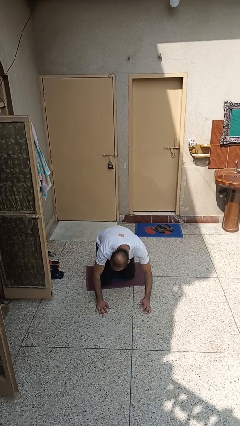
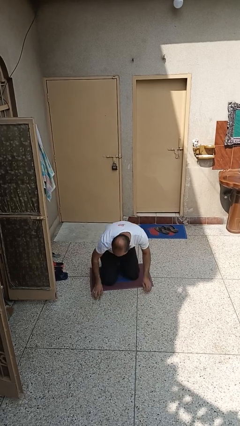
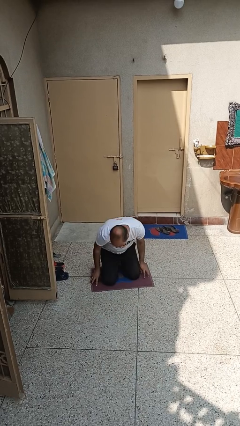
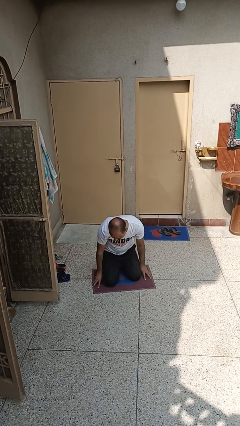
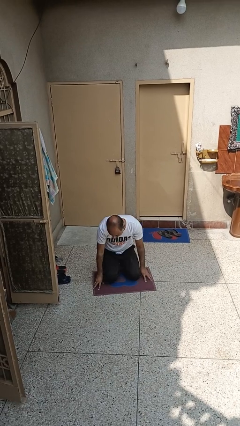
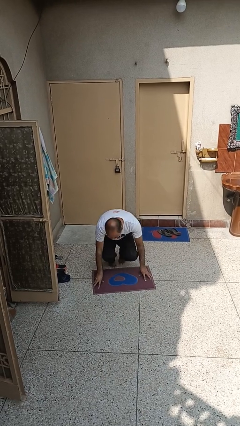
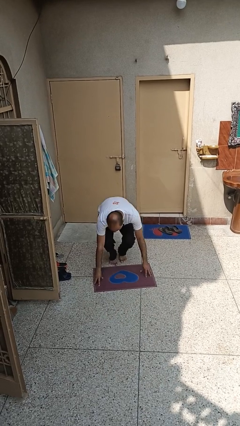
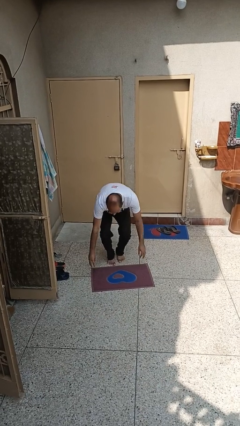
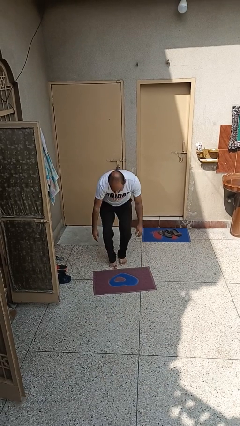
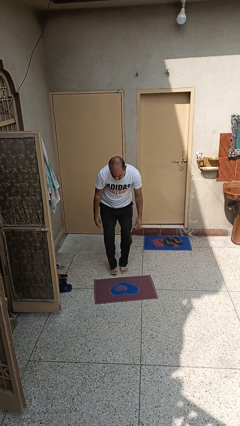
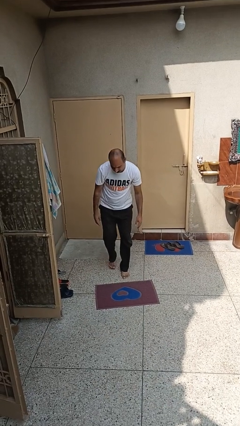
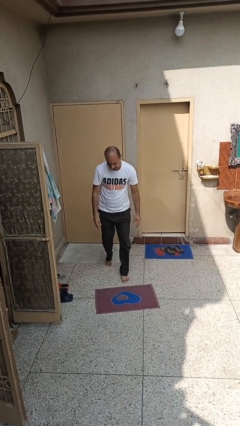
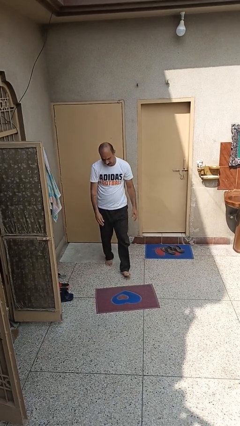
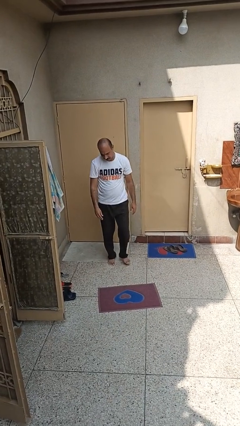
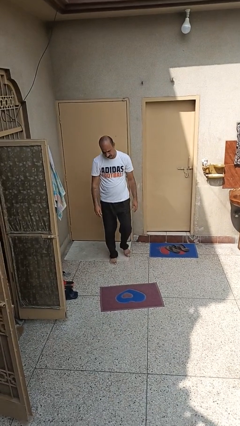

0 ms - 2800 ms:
person stands up from floor

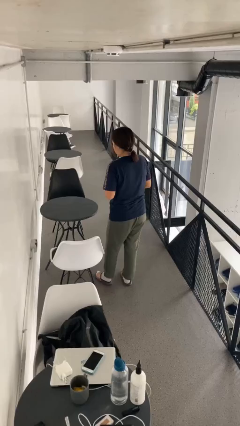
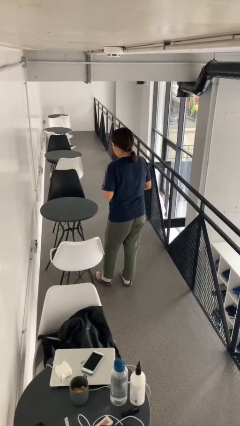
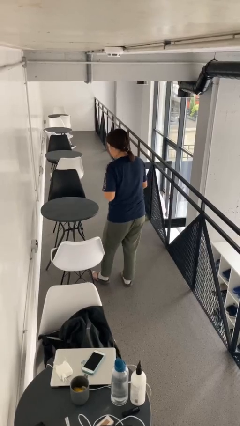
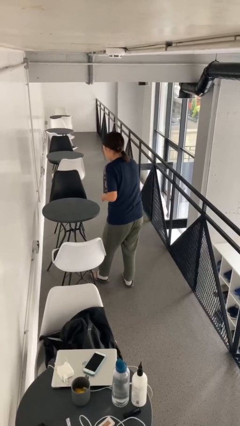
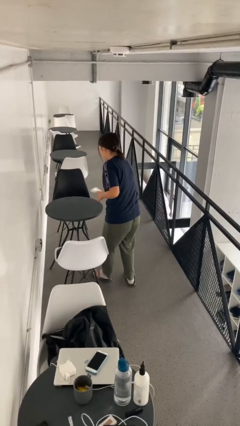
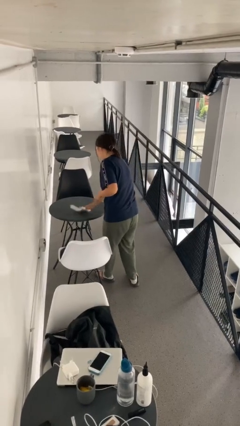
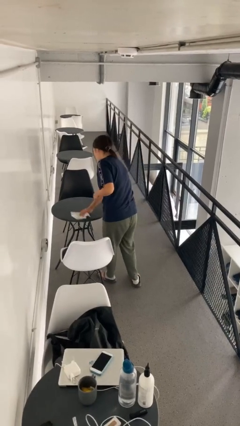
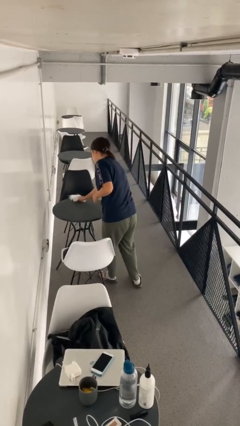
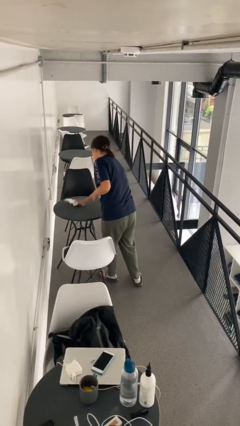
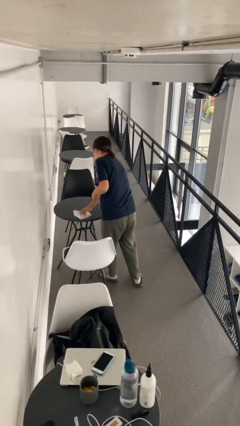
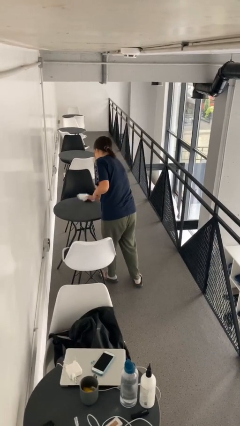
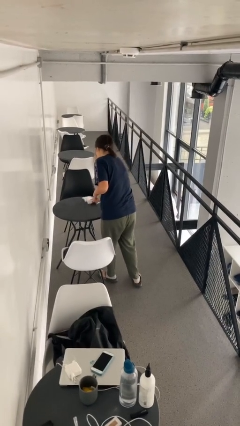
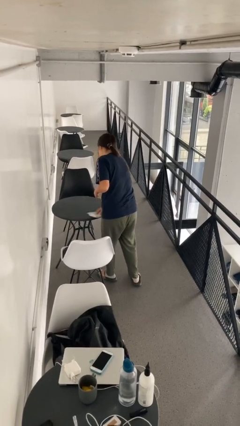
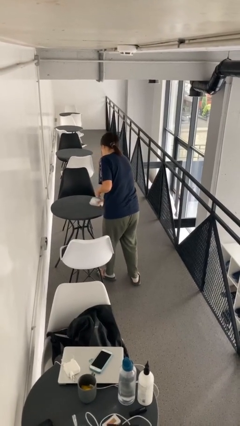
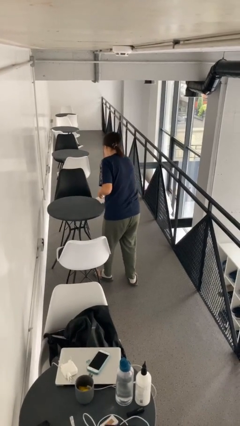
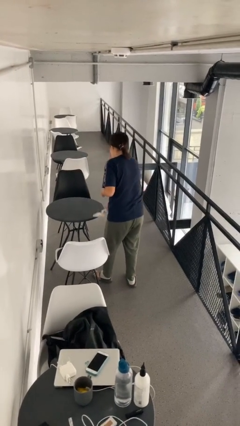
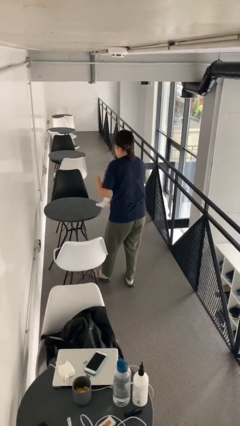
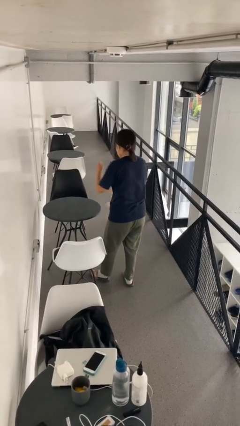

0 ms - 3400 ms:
person cleans table with rag

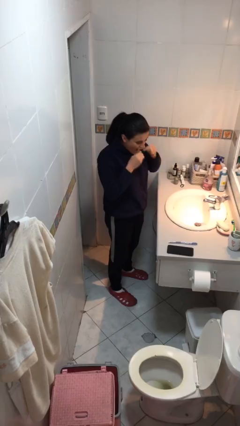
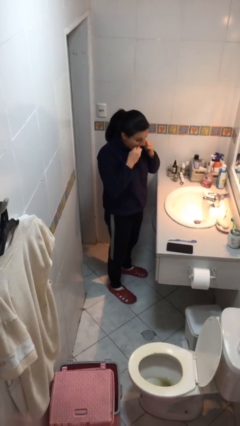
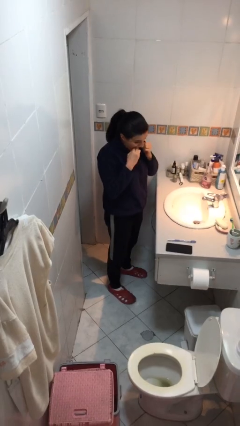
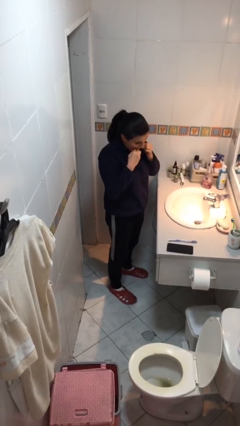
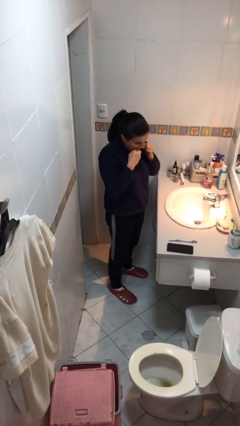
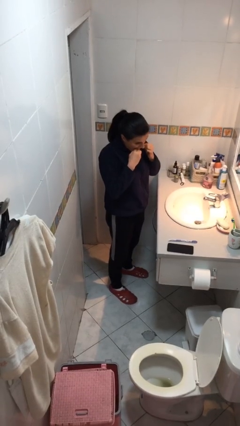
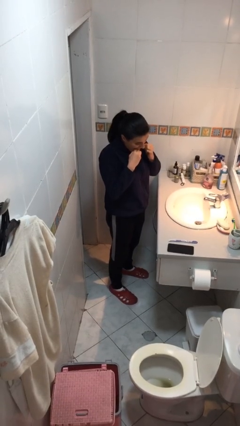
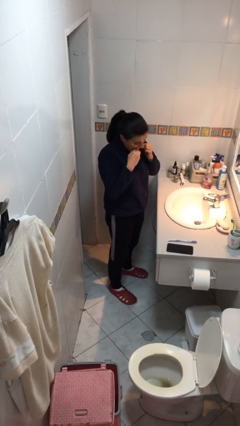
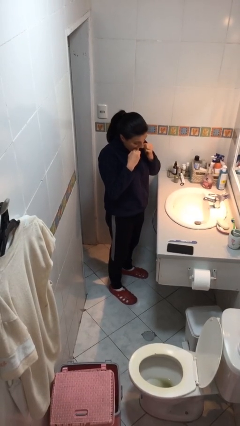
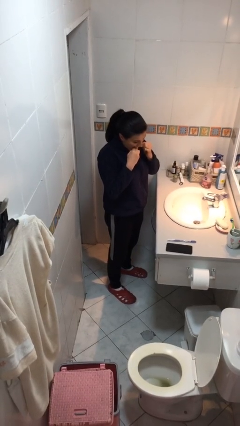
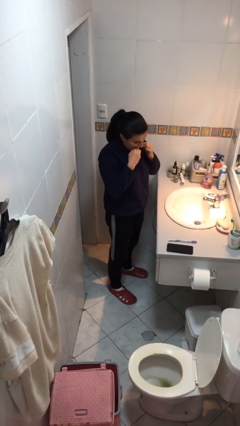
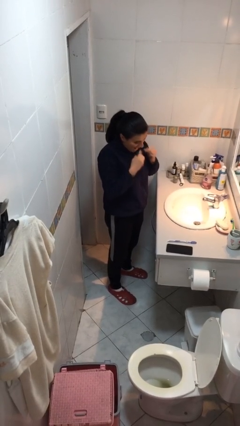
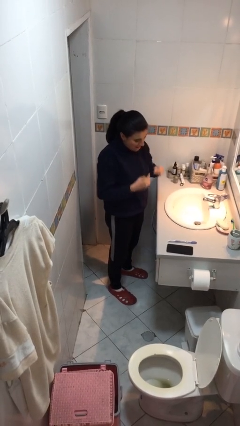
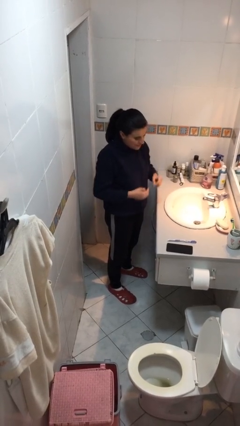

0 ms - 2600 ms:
person flosses

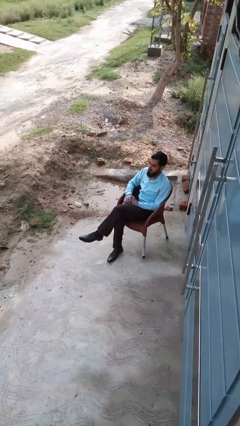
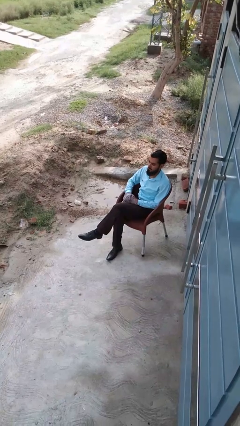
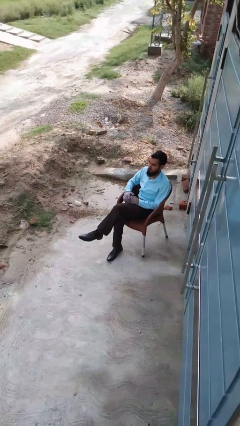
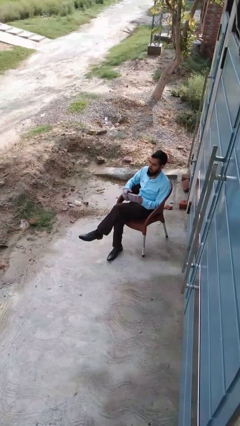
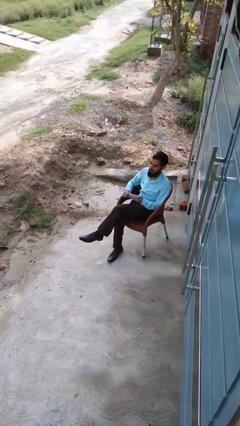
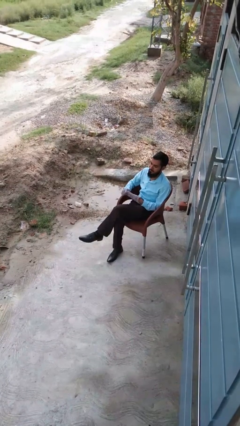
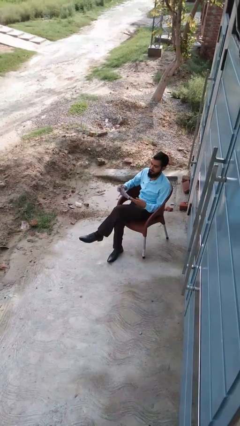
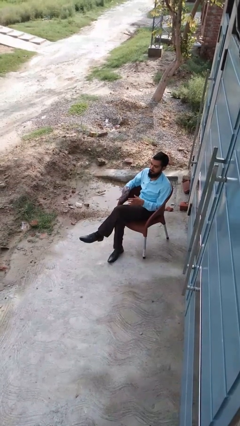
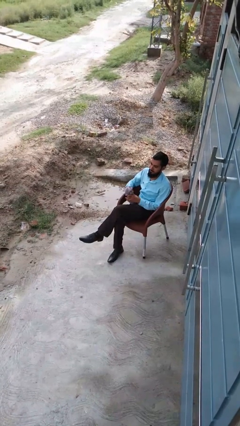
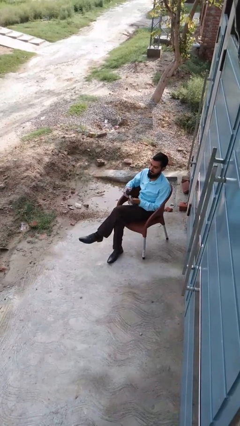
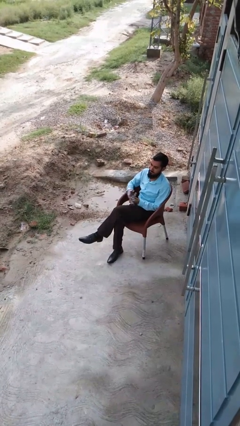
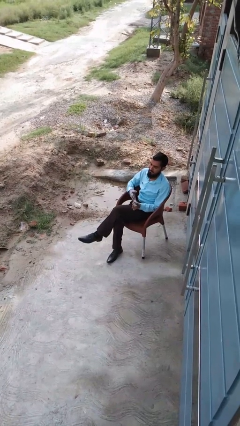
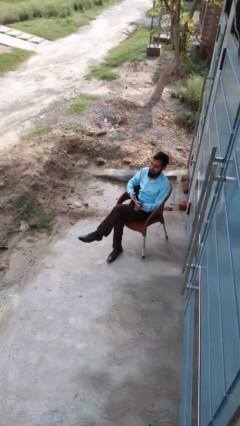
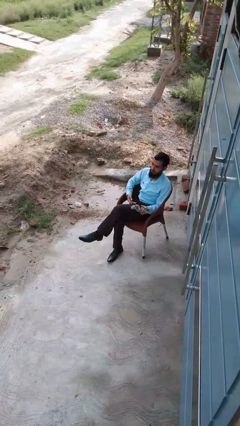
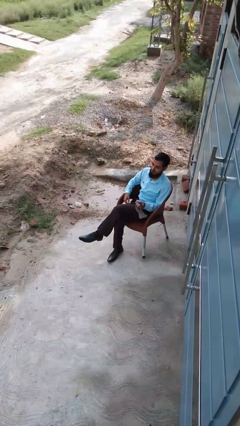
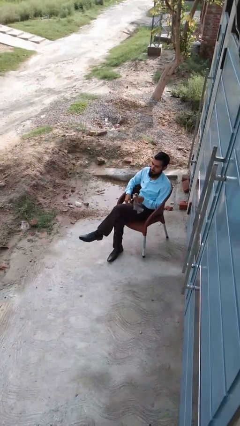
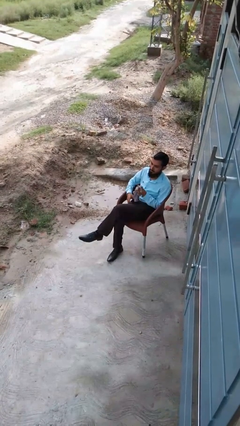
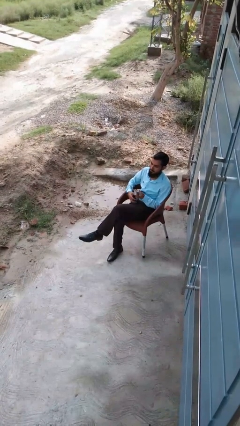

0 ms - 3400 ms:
person takes off gloves

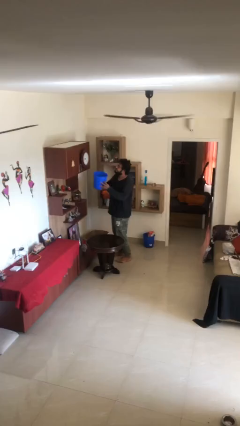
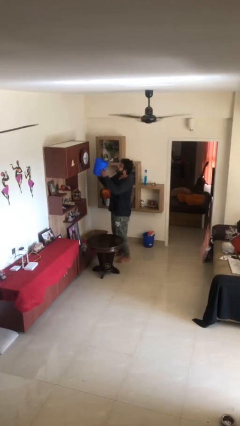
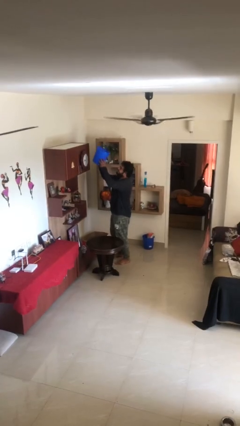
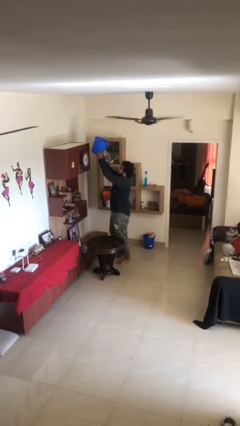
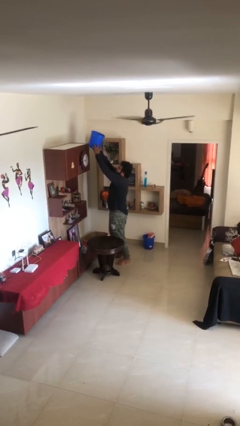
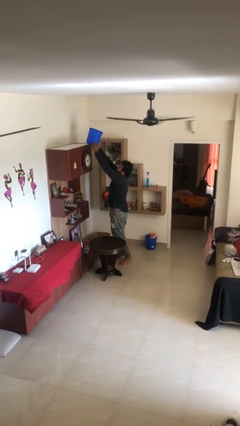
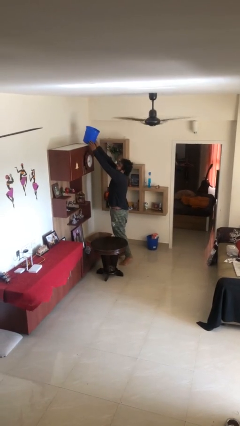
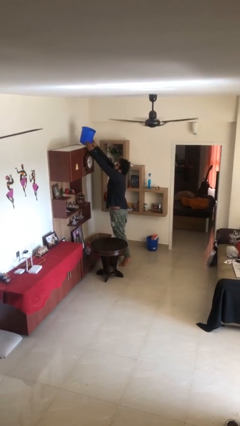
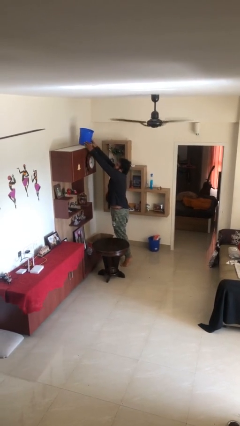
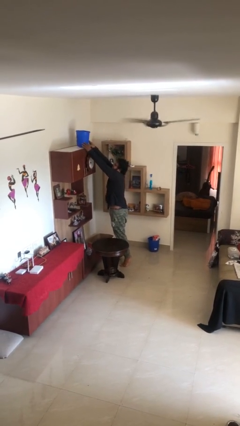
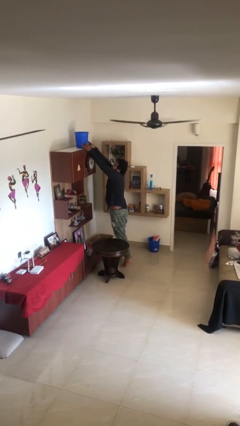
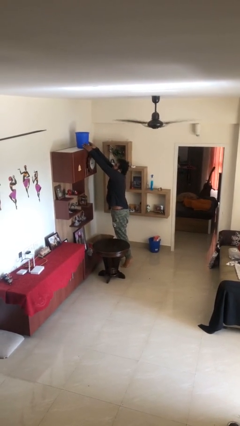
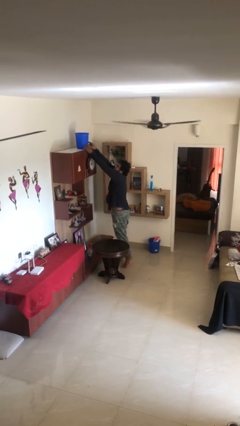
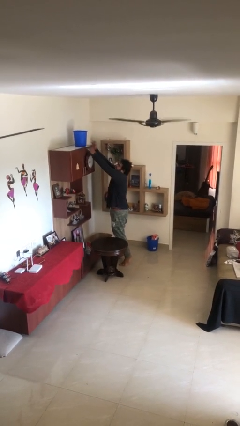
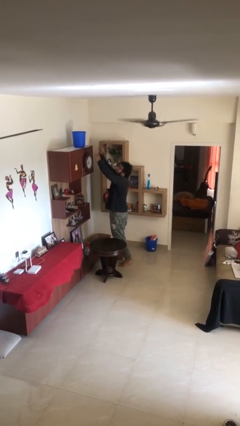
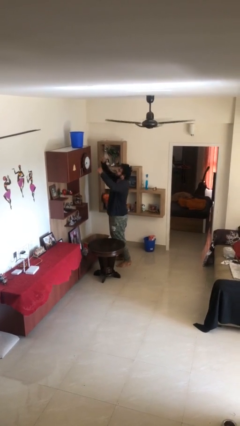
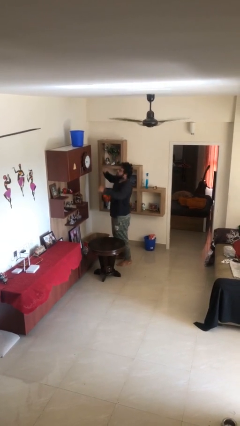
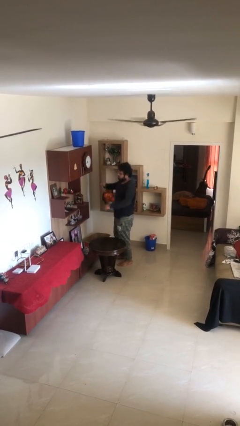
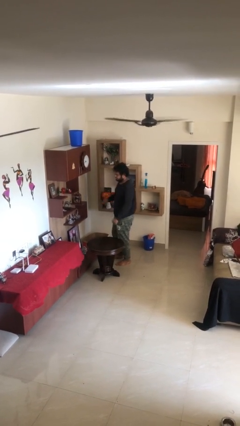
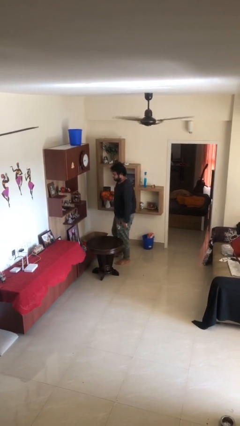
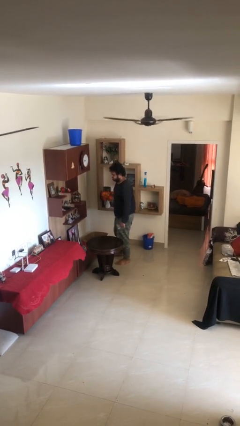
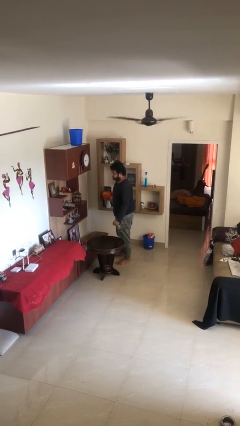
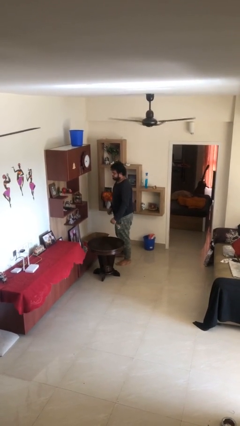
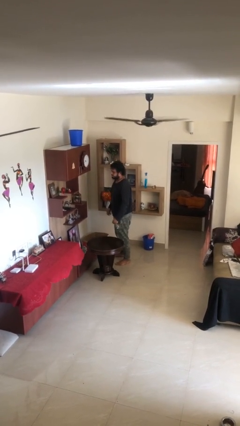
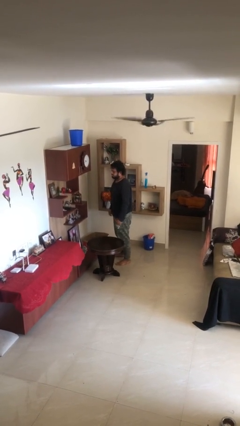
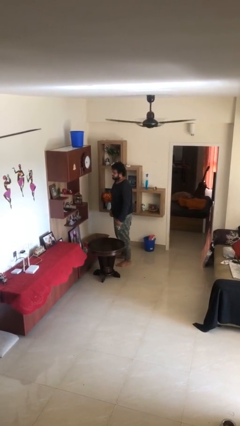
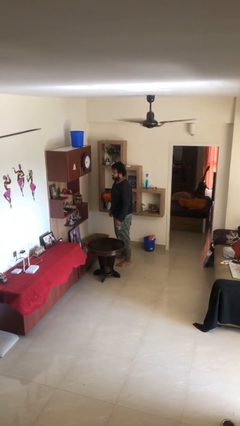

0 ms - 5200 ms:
person puts down object on shelf
